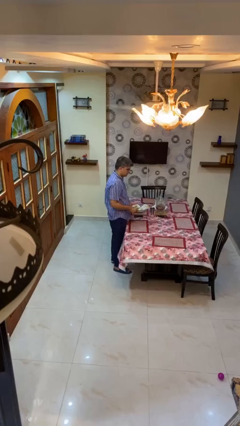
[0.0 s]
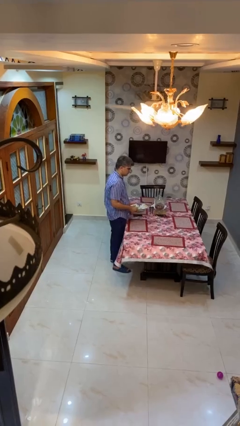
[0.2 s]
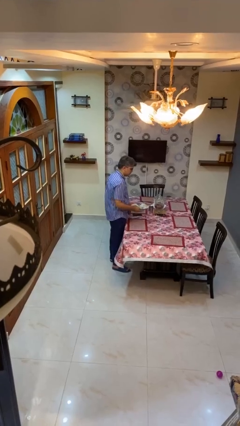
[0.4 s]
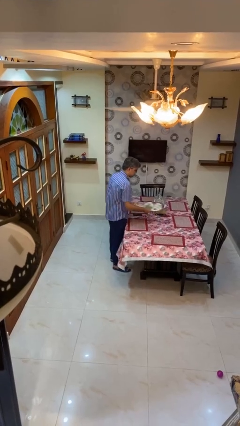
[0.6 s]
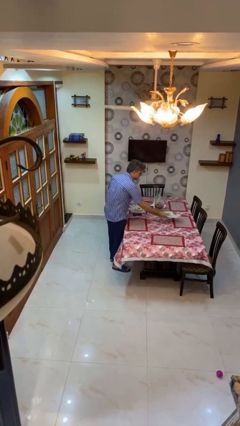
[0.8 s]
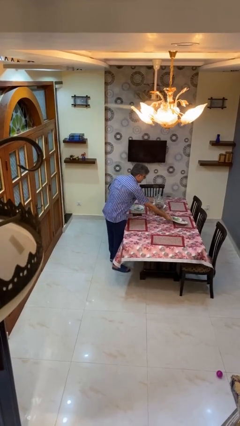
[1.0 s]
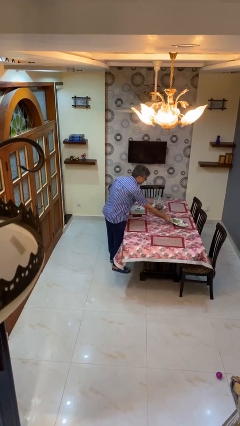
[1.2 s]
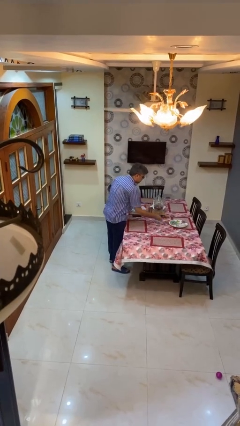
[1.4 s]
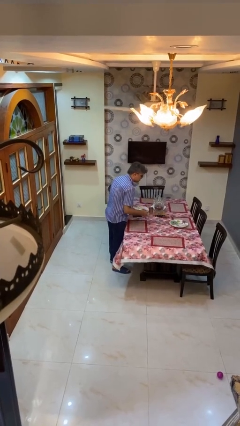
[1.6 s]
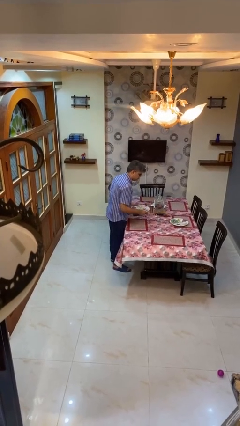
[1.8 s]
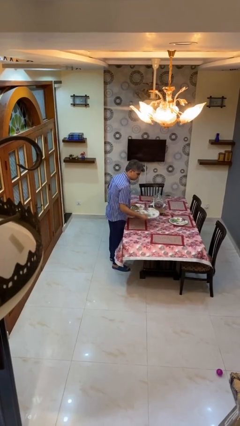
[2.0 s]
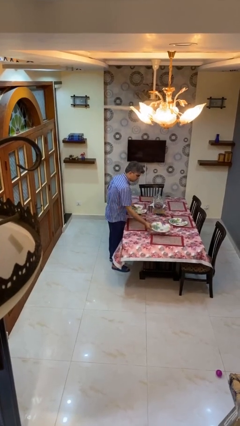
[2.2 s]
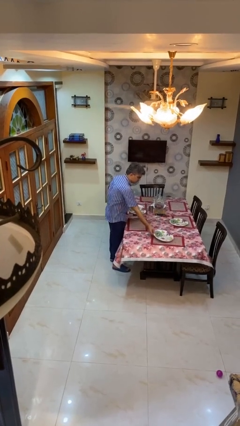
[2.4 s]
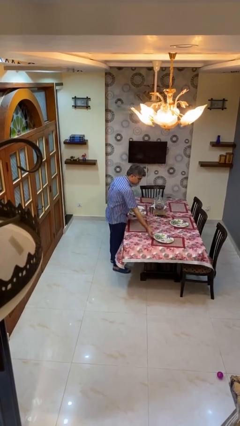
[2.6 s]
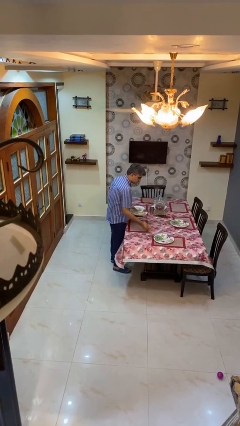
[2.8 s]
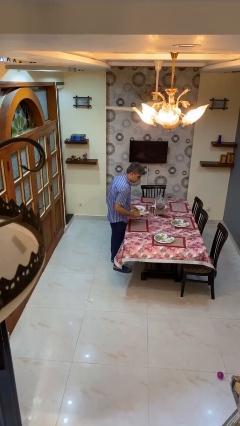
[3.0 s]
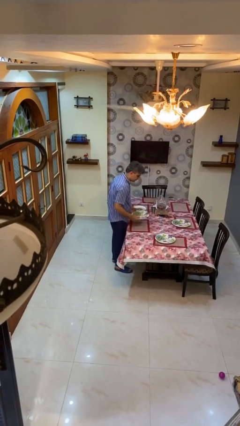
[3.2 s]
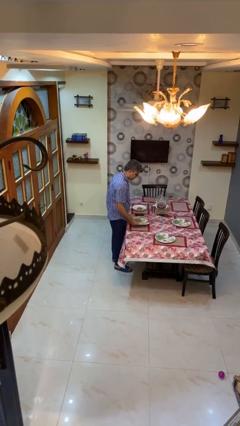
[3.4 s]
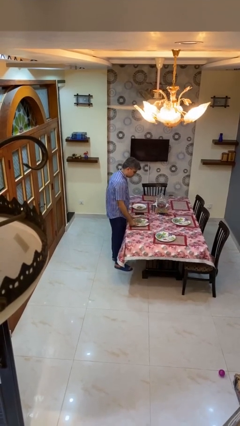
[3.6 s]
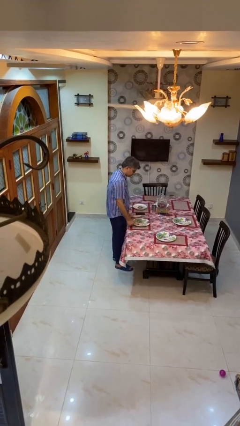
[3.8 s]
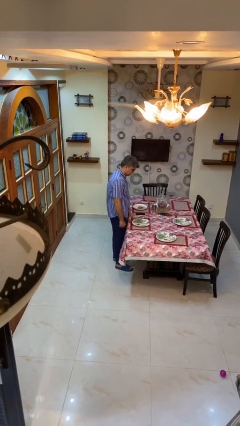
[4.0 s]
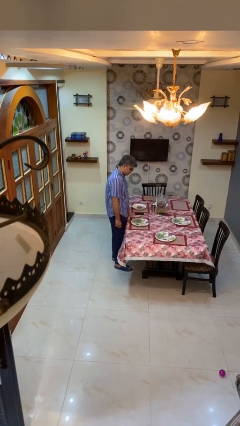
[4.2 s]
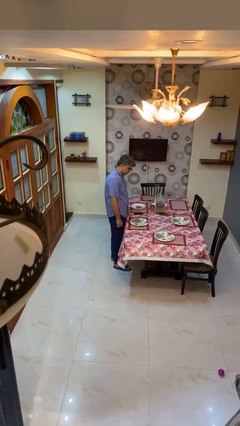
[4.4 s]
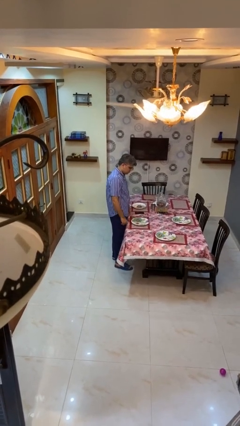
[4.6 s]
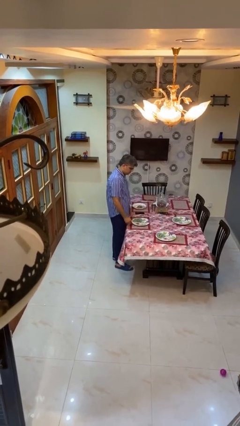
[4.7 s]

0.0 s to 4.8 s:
person sets table

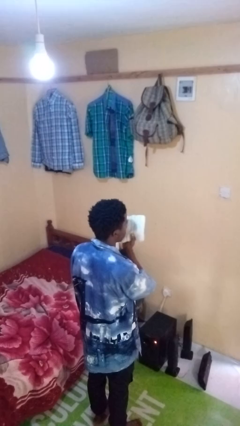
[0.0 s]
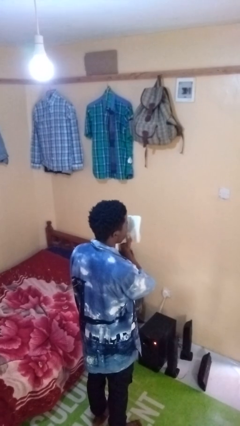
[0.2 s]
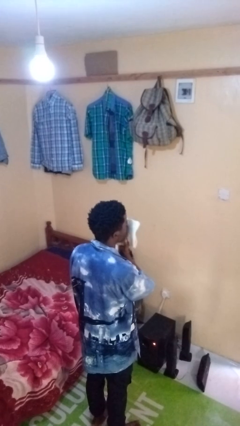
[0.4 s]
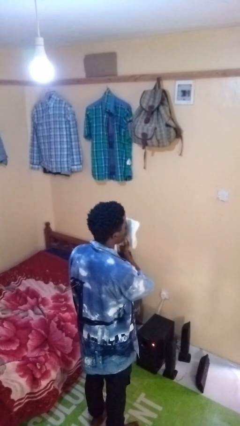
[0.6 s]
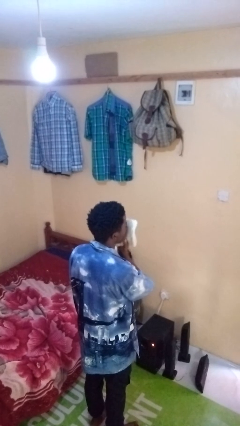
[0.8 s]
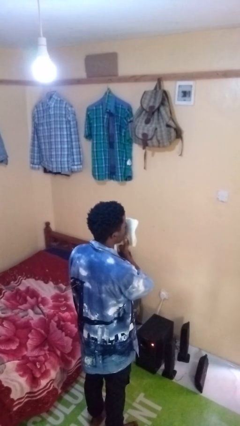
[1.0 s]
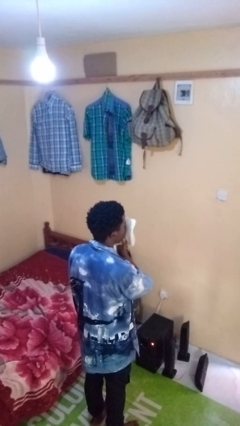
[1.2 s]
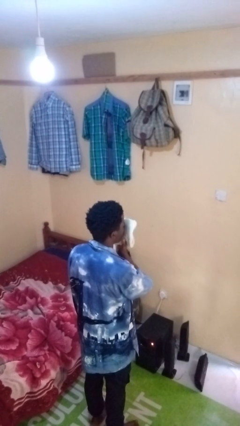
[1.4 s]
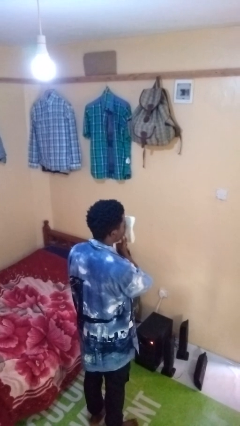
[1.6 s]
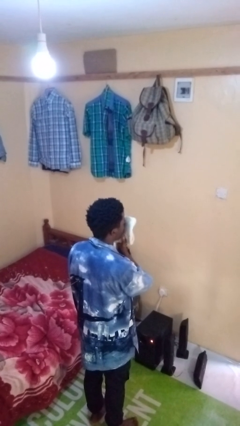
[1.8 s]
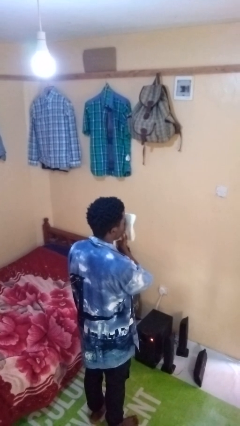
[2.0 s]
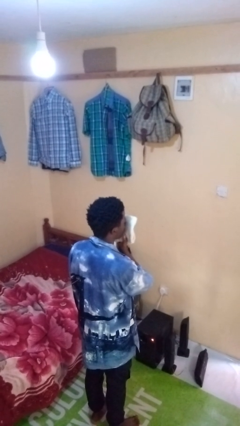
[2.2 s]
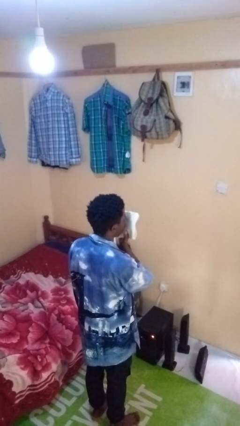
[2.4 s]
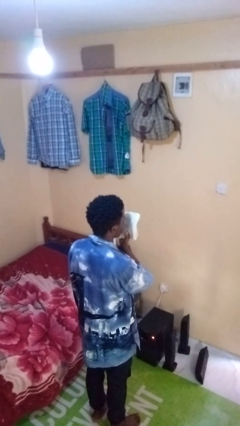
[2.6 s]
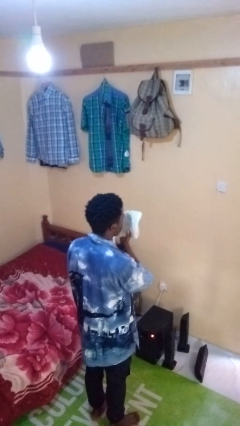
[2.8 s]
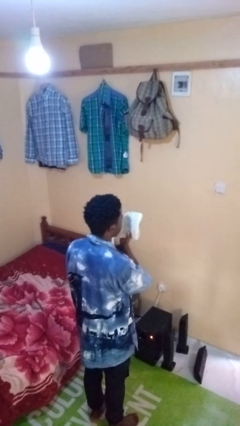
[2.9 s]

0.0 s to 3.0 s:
person wipes mouth with napkin

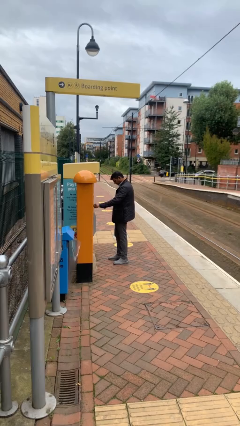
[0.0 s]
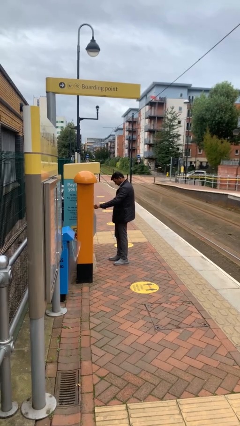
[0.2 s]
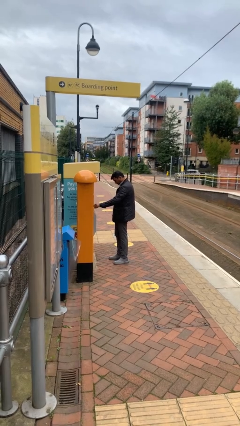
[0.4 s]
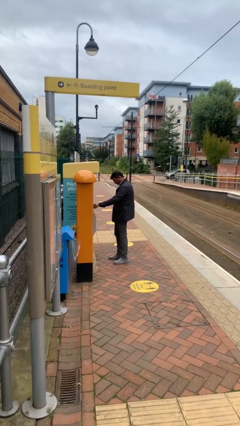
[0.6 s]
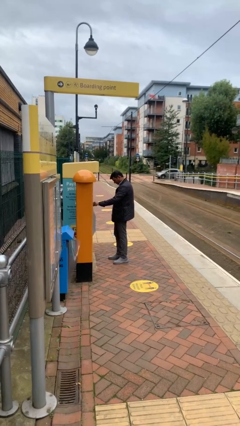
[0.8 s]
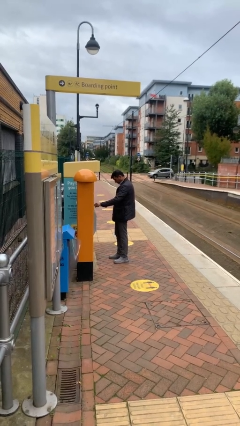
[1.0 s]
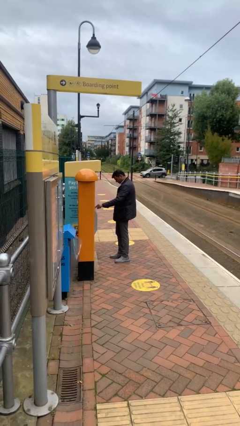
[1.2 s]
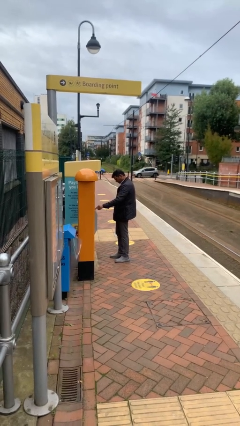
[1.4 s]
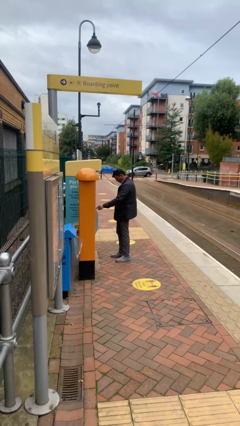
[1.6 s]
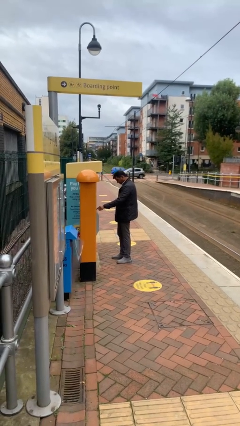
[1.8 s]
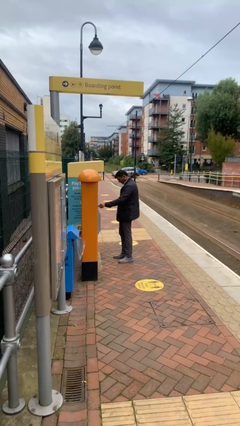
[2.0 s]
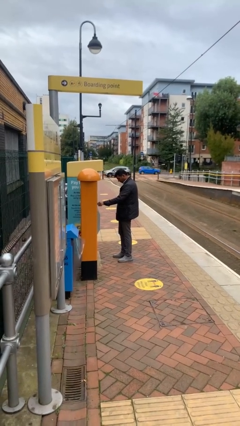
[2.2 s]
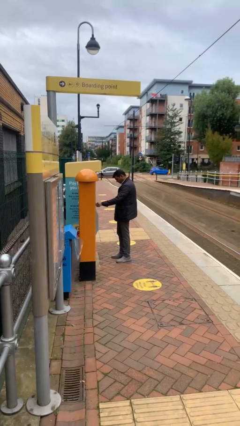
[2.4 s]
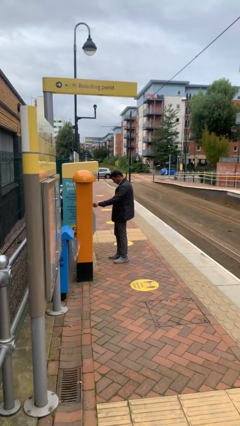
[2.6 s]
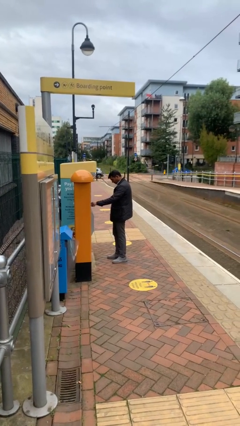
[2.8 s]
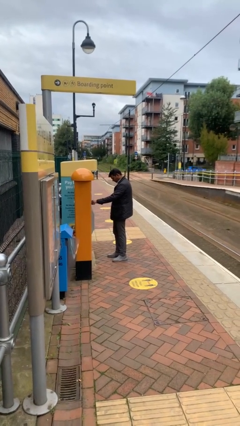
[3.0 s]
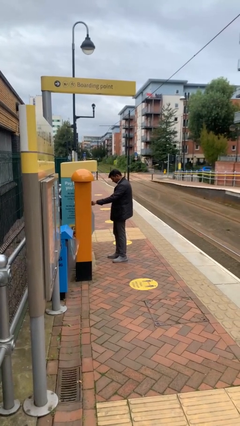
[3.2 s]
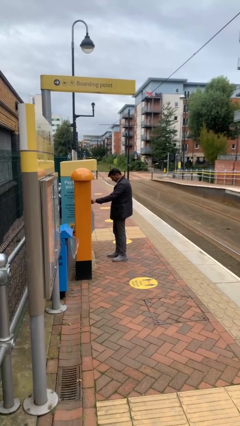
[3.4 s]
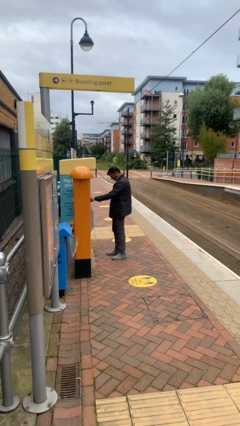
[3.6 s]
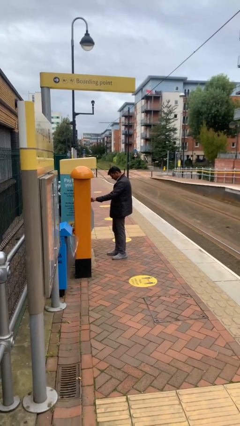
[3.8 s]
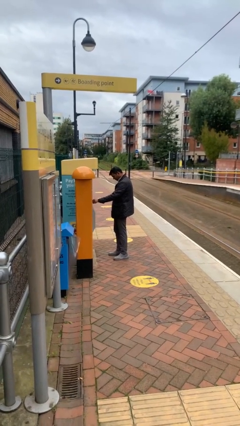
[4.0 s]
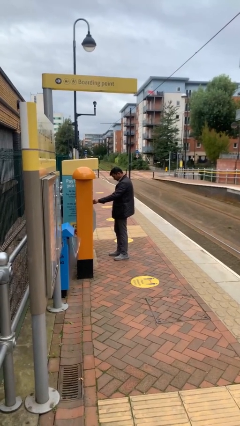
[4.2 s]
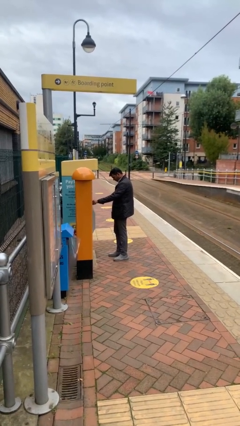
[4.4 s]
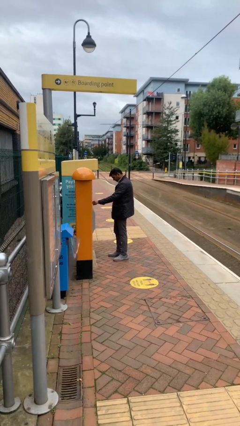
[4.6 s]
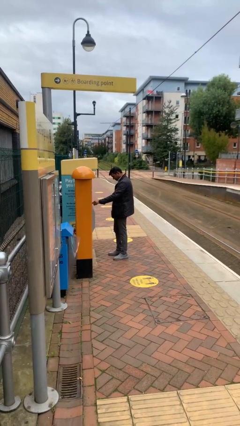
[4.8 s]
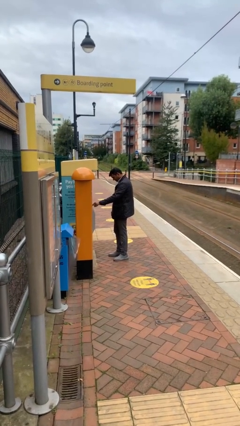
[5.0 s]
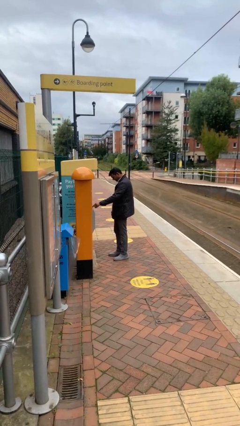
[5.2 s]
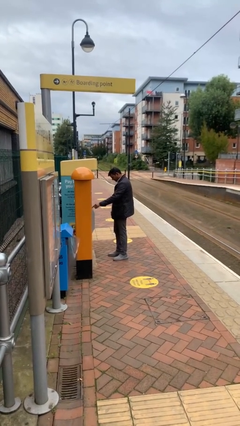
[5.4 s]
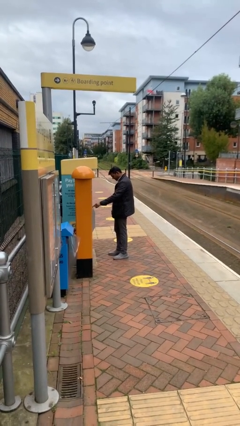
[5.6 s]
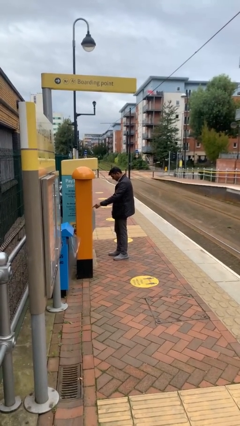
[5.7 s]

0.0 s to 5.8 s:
person purchases from machine

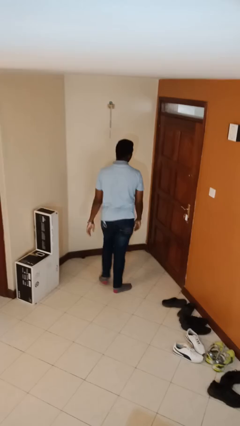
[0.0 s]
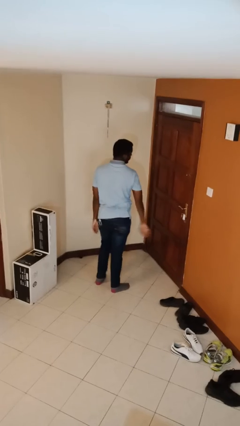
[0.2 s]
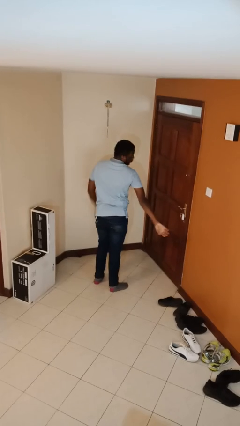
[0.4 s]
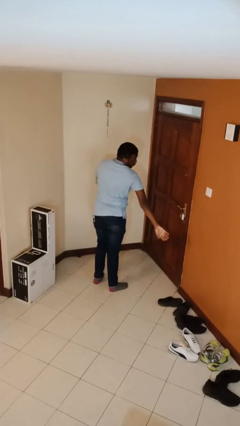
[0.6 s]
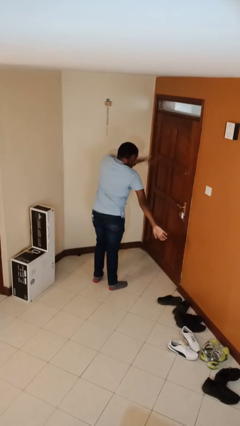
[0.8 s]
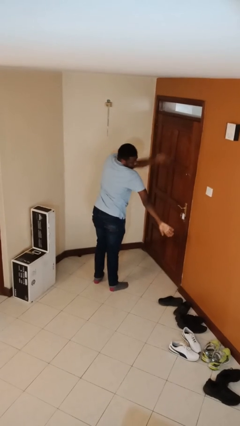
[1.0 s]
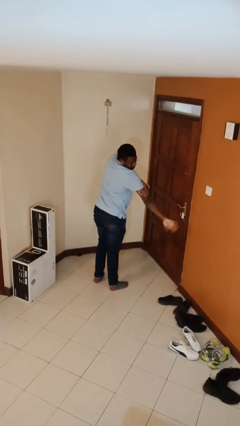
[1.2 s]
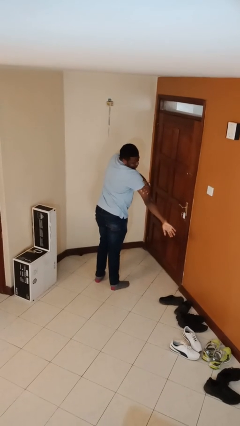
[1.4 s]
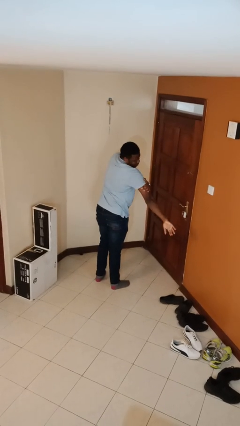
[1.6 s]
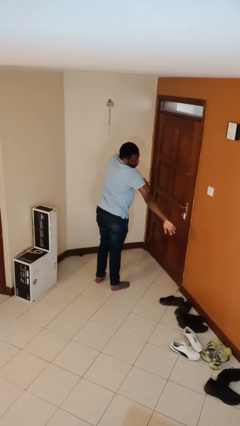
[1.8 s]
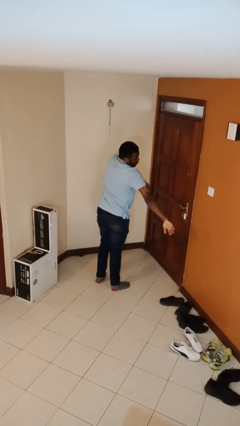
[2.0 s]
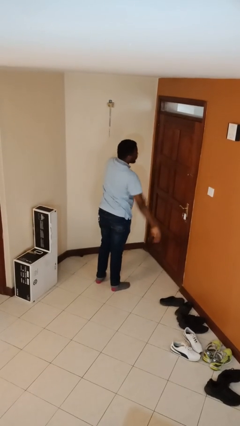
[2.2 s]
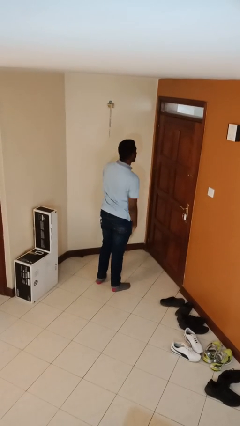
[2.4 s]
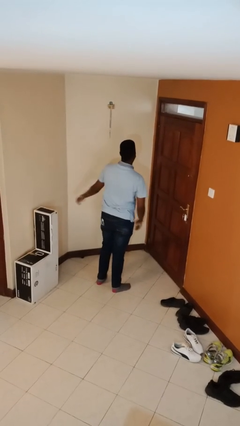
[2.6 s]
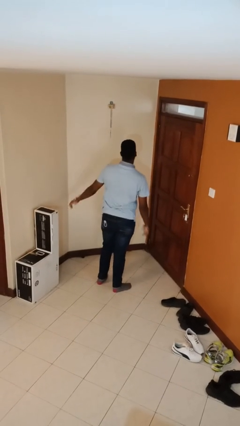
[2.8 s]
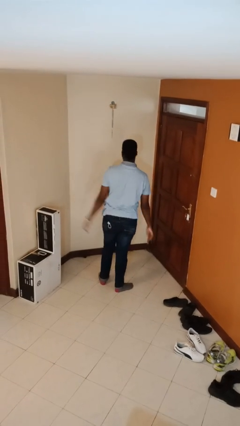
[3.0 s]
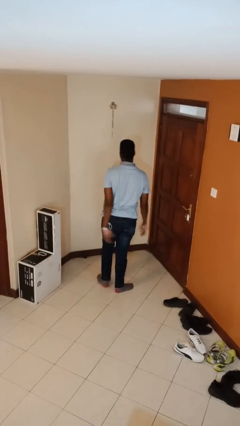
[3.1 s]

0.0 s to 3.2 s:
person swats bug

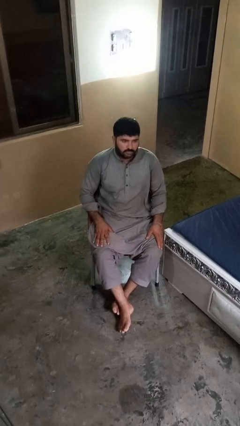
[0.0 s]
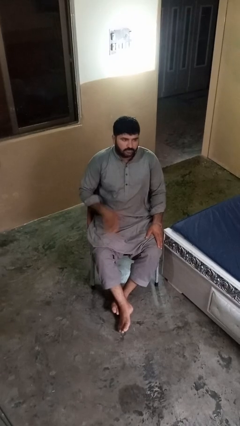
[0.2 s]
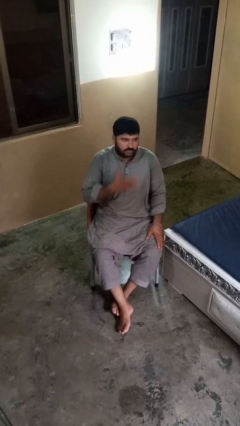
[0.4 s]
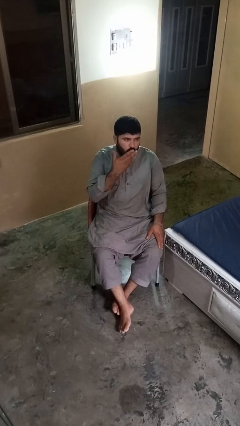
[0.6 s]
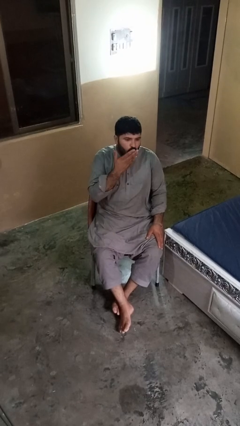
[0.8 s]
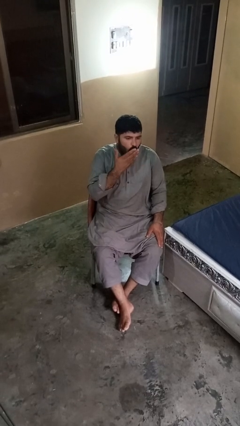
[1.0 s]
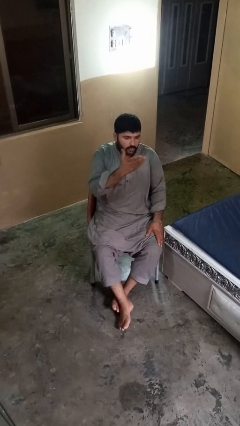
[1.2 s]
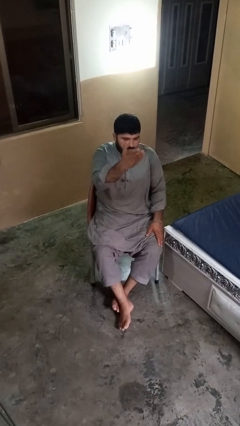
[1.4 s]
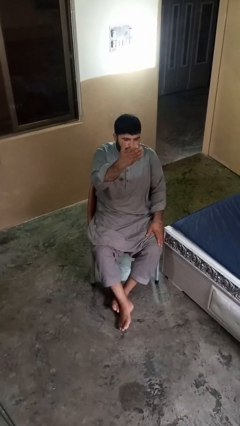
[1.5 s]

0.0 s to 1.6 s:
person gestures blow kiss
